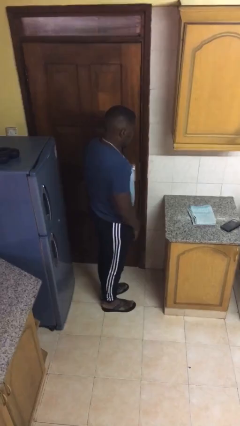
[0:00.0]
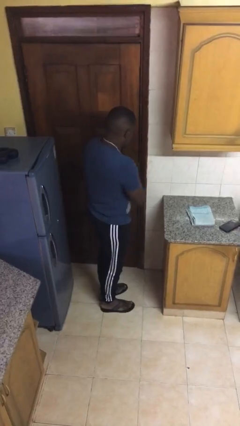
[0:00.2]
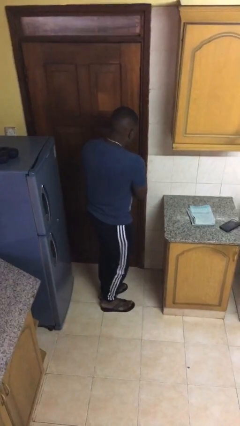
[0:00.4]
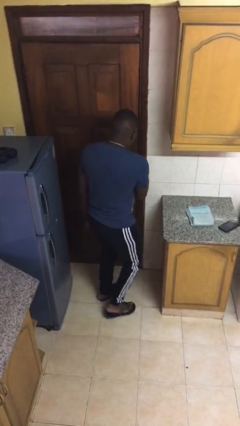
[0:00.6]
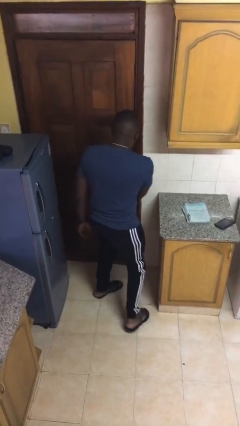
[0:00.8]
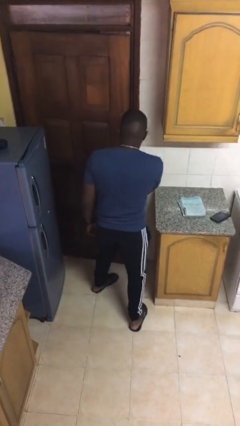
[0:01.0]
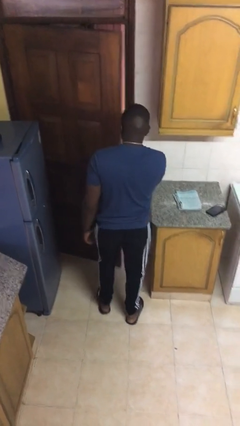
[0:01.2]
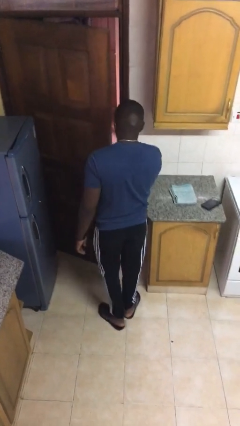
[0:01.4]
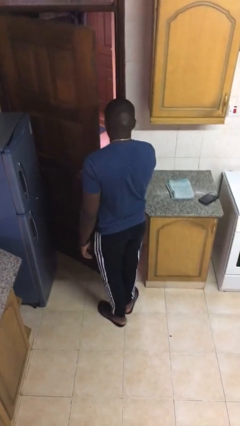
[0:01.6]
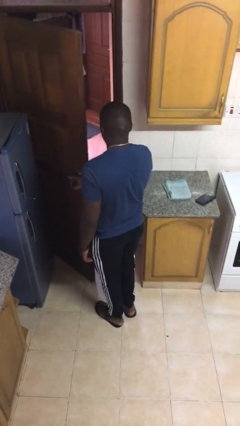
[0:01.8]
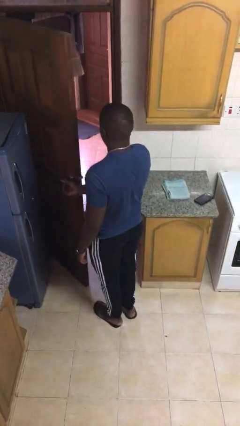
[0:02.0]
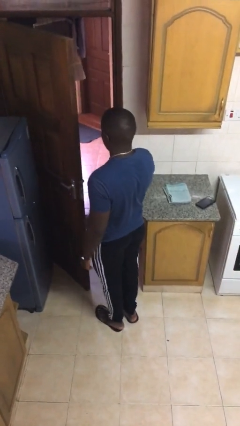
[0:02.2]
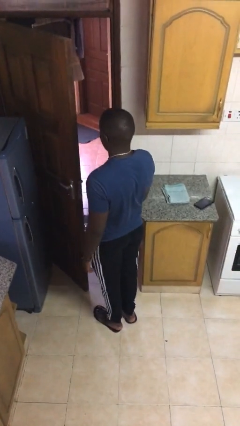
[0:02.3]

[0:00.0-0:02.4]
person opens facility door

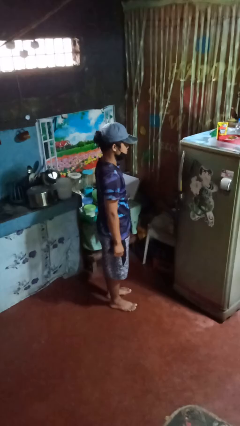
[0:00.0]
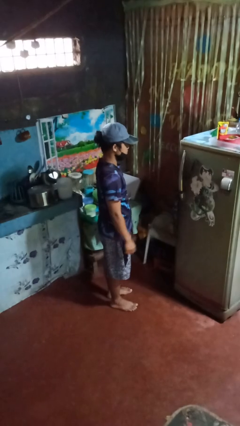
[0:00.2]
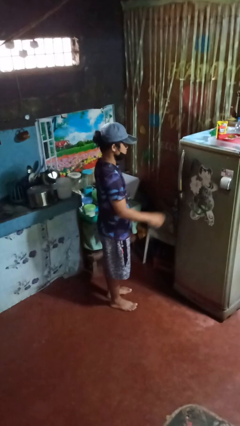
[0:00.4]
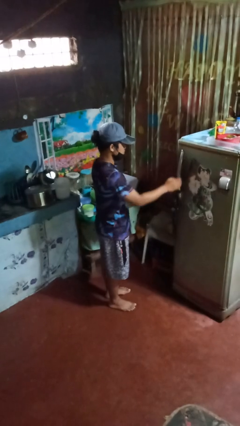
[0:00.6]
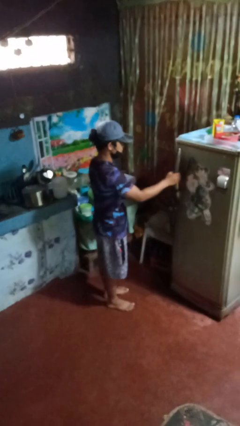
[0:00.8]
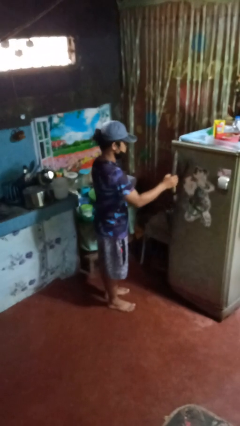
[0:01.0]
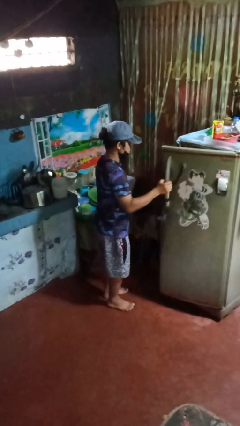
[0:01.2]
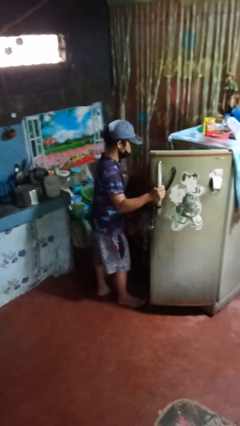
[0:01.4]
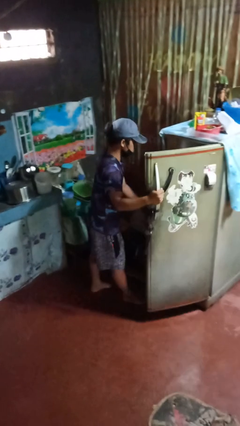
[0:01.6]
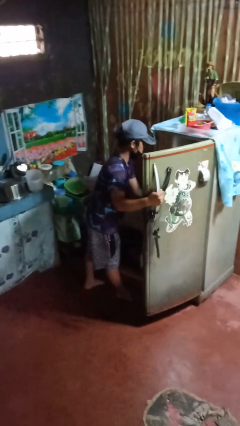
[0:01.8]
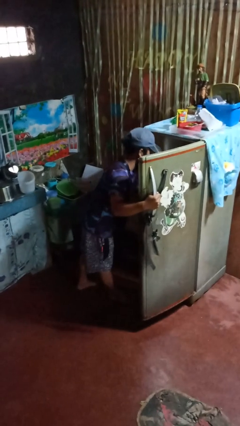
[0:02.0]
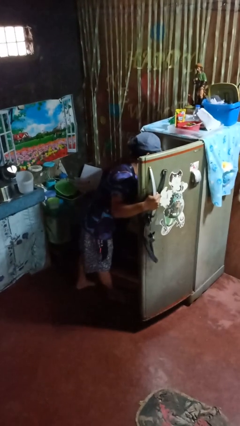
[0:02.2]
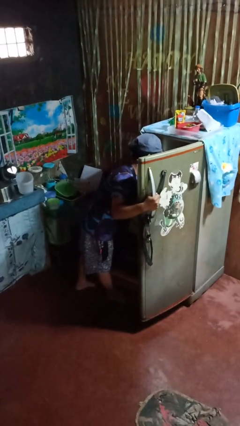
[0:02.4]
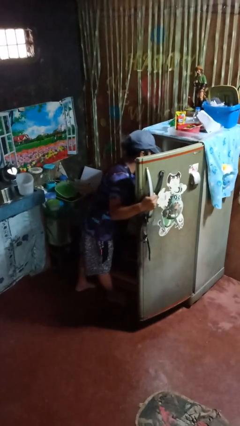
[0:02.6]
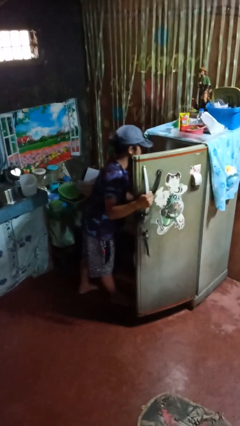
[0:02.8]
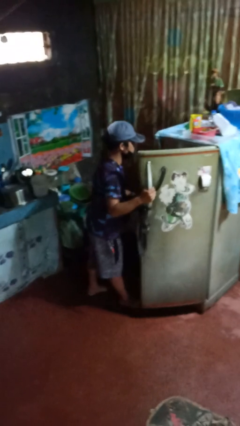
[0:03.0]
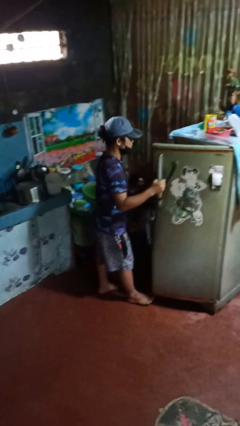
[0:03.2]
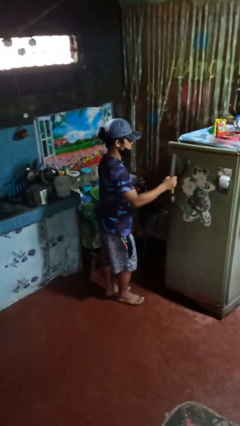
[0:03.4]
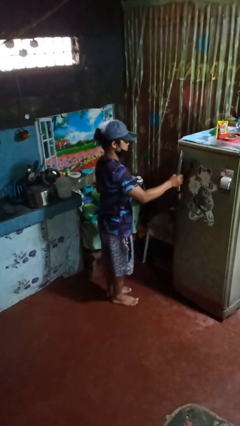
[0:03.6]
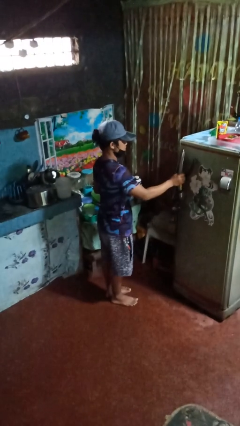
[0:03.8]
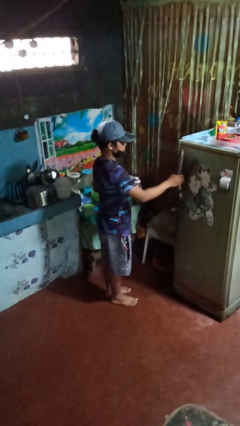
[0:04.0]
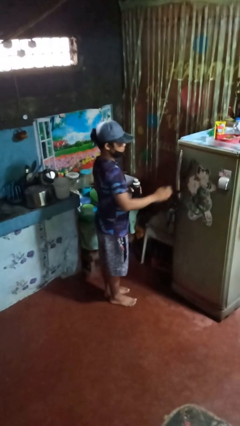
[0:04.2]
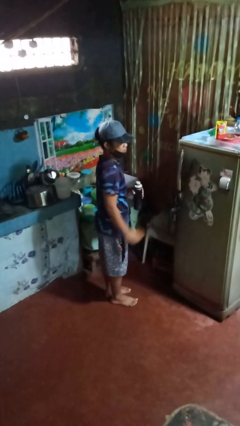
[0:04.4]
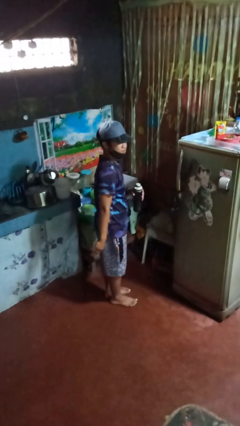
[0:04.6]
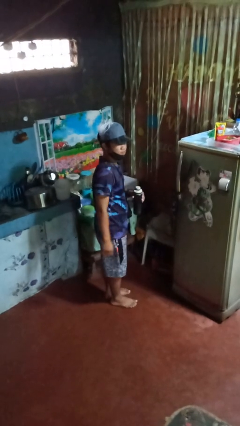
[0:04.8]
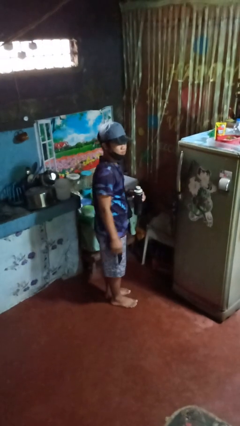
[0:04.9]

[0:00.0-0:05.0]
person takes object from refrigerator

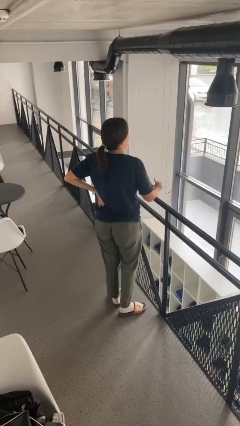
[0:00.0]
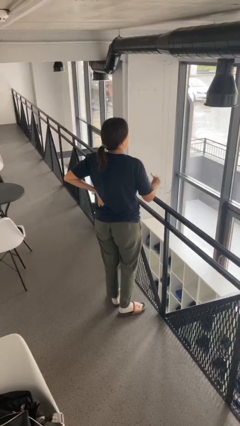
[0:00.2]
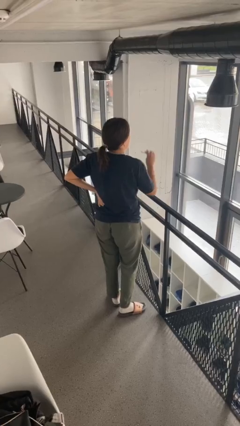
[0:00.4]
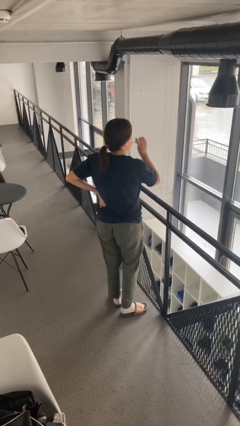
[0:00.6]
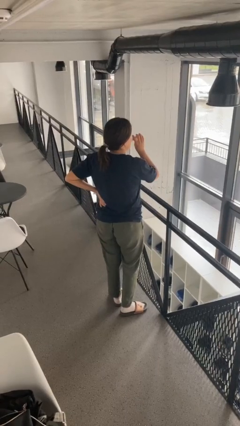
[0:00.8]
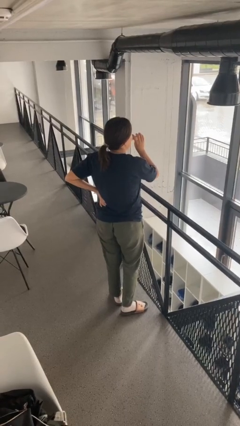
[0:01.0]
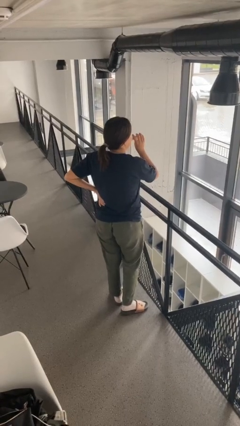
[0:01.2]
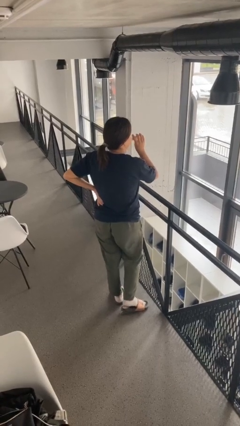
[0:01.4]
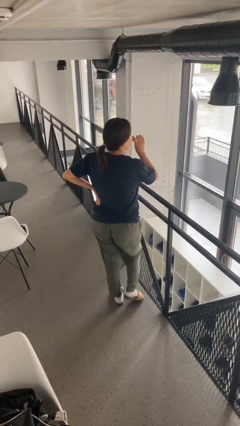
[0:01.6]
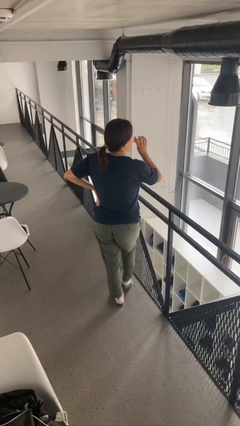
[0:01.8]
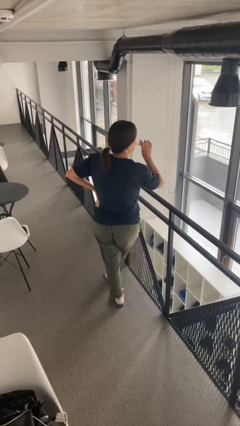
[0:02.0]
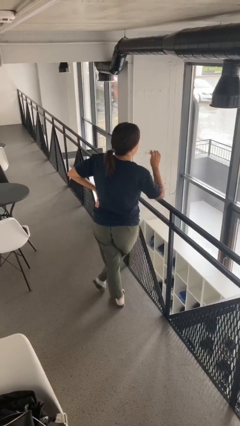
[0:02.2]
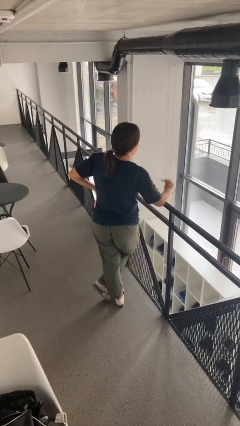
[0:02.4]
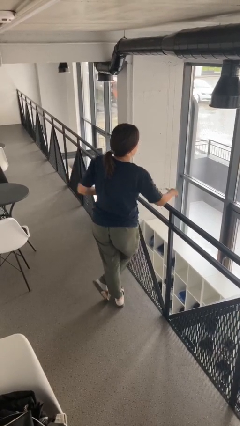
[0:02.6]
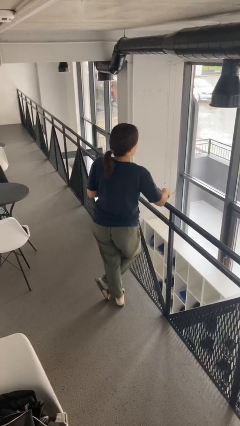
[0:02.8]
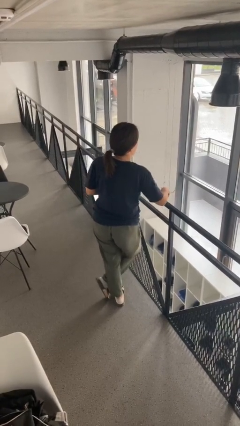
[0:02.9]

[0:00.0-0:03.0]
person vapes

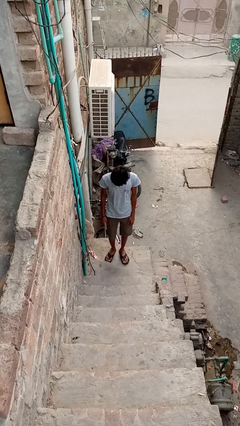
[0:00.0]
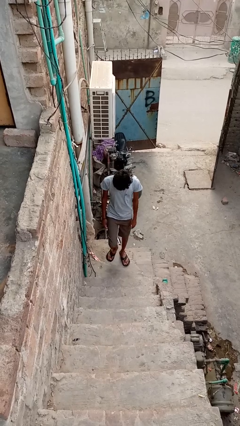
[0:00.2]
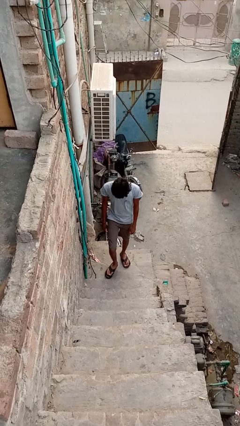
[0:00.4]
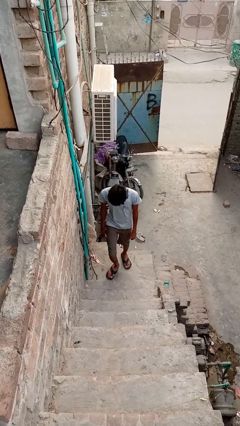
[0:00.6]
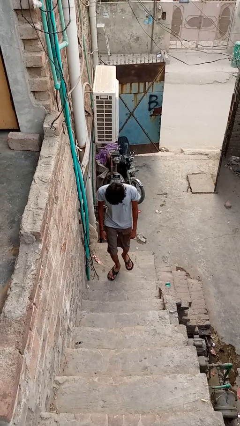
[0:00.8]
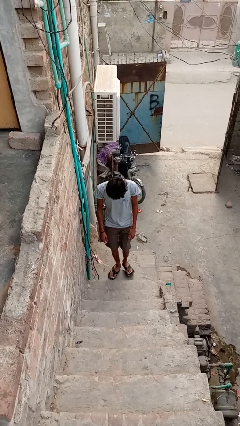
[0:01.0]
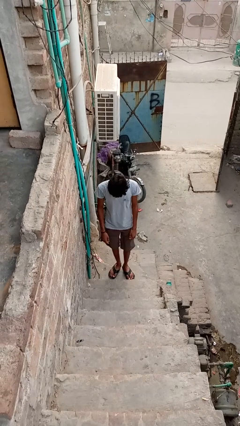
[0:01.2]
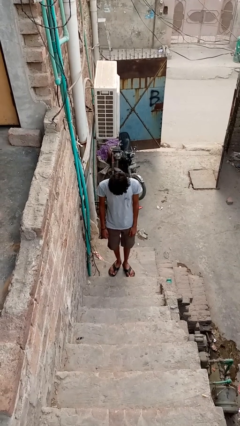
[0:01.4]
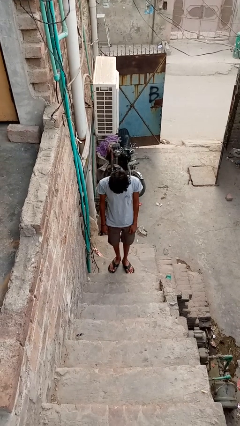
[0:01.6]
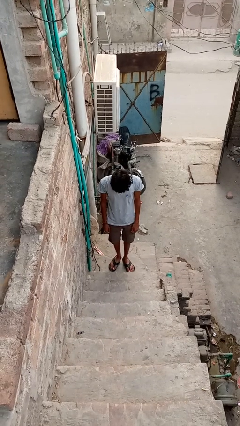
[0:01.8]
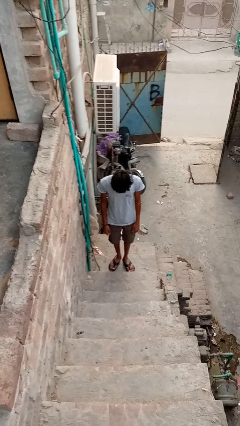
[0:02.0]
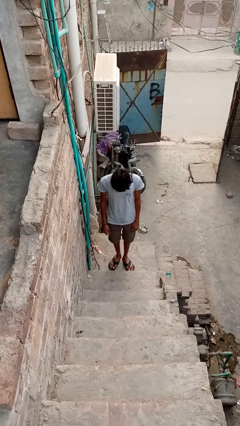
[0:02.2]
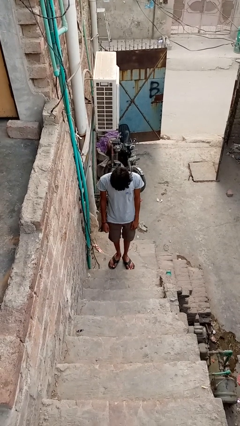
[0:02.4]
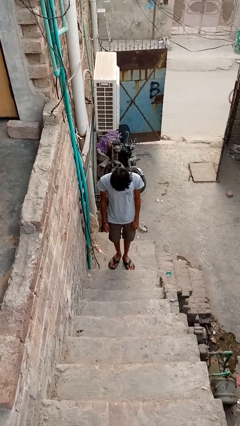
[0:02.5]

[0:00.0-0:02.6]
person climbs up stairs

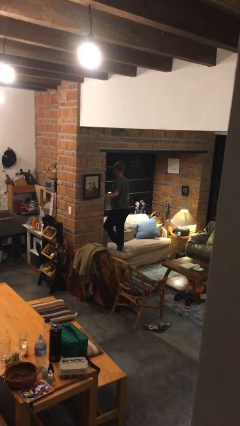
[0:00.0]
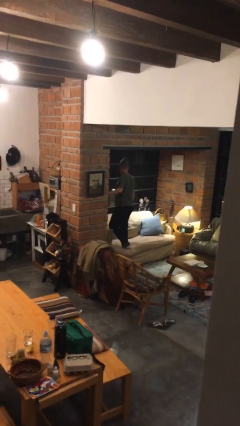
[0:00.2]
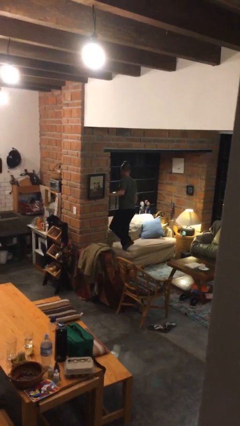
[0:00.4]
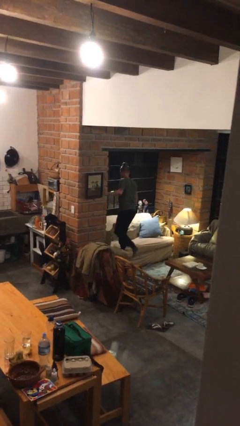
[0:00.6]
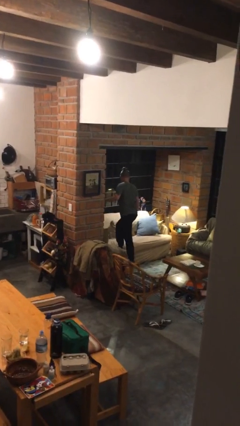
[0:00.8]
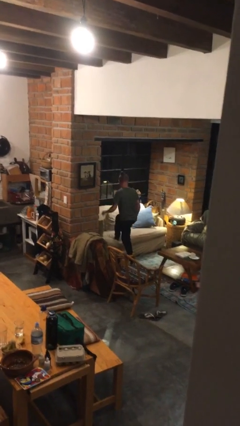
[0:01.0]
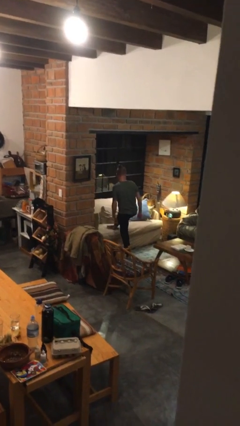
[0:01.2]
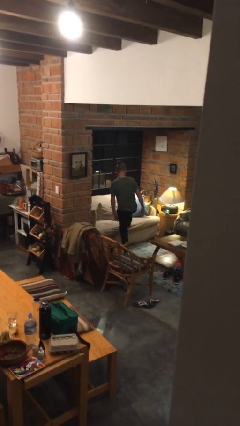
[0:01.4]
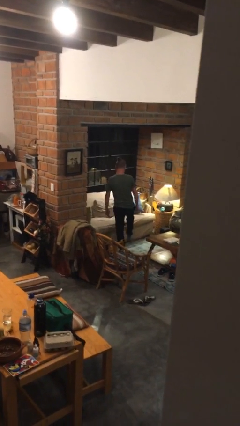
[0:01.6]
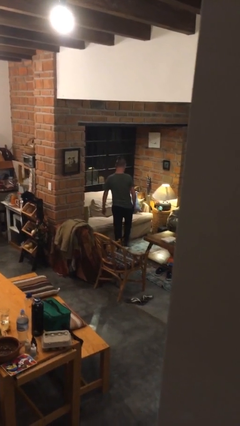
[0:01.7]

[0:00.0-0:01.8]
person climbs off couch

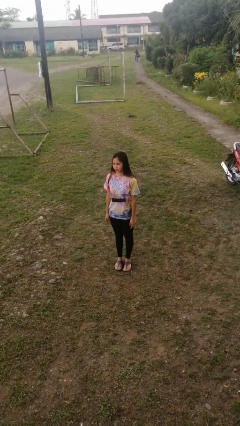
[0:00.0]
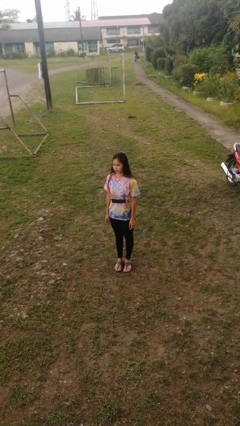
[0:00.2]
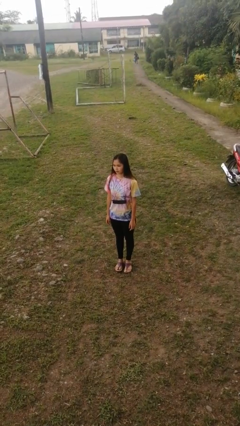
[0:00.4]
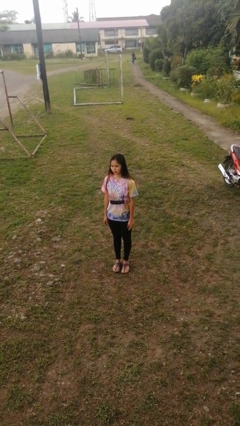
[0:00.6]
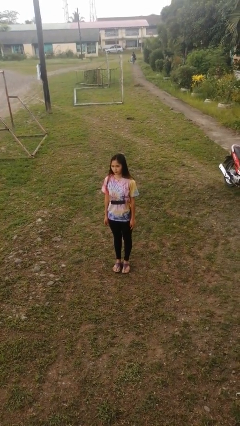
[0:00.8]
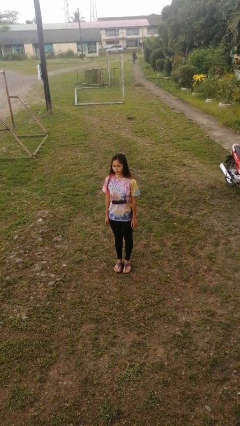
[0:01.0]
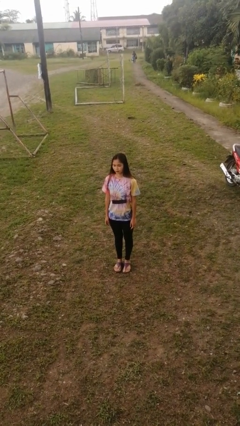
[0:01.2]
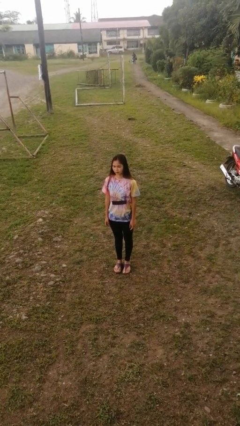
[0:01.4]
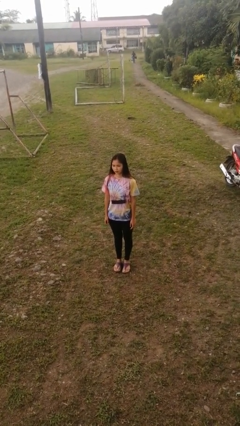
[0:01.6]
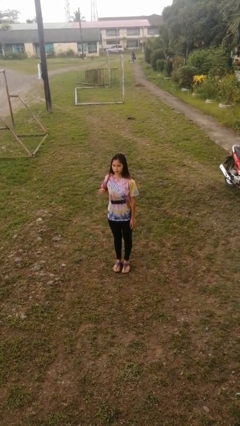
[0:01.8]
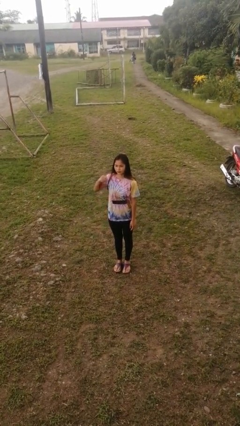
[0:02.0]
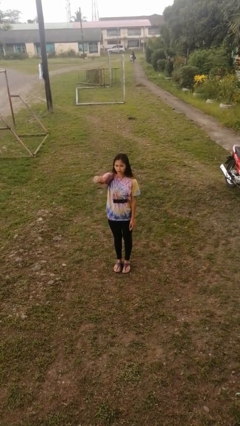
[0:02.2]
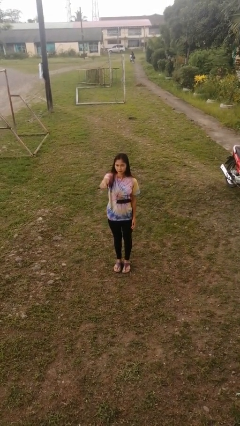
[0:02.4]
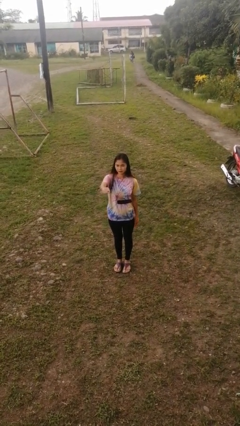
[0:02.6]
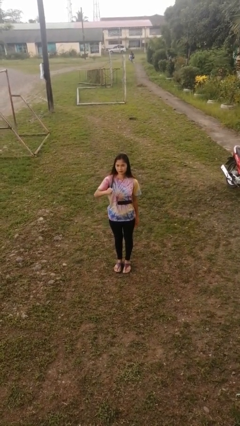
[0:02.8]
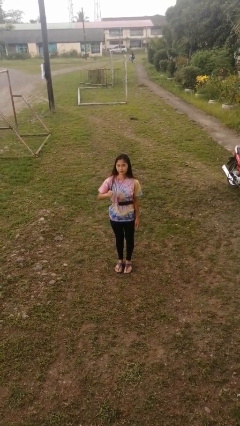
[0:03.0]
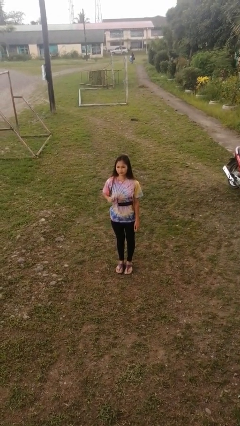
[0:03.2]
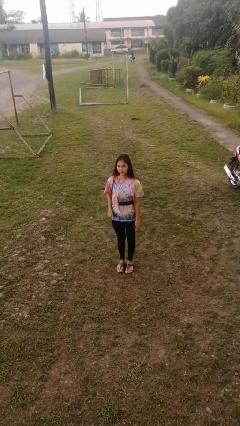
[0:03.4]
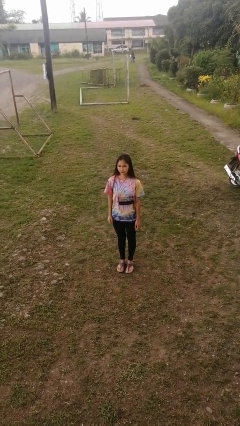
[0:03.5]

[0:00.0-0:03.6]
person punches
